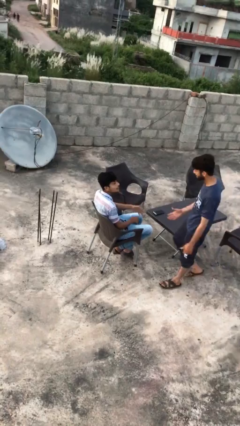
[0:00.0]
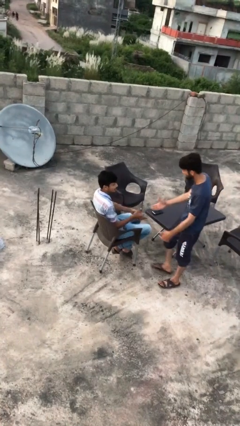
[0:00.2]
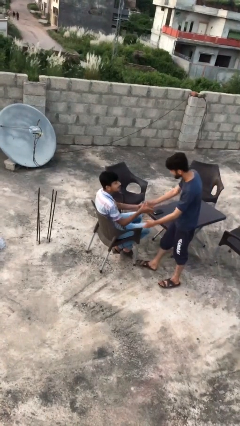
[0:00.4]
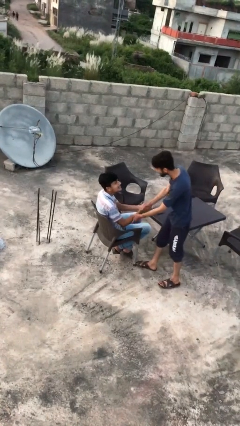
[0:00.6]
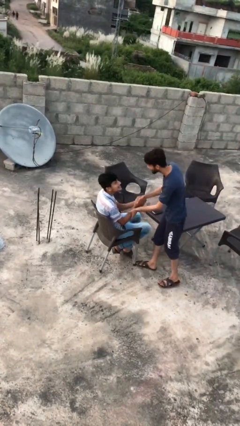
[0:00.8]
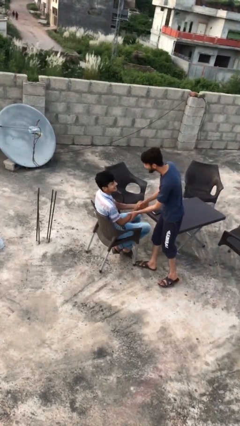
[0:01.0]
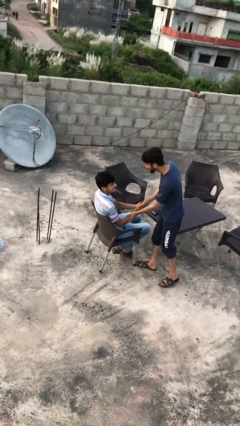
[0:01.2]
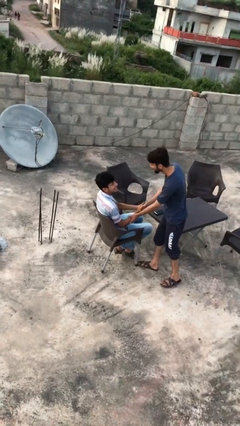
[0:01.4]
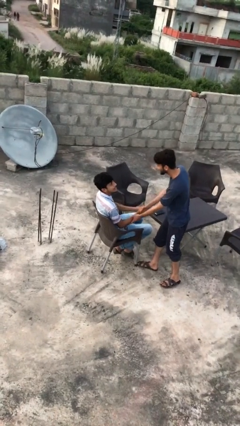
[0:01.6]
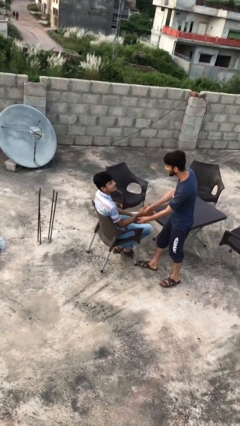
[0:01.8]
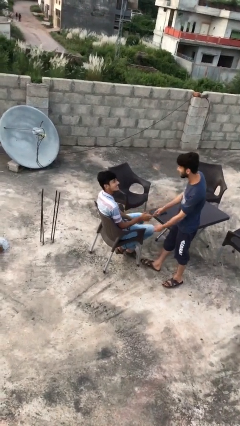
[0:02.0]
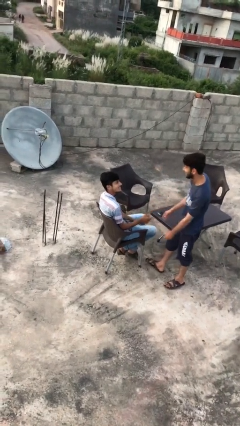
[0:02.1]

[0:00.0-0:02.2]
person shakes hand

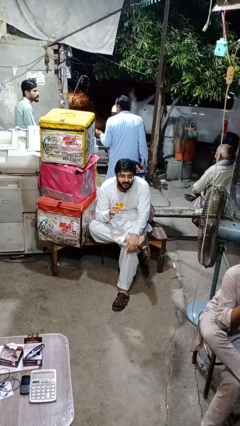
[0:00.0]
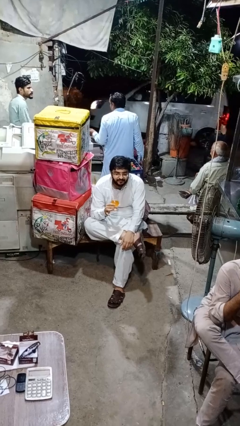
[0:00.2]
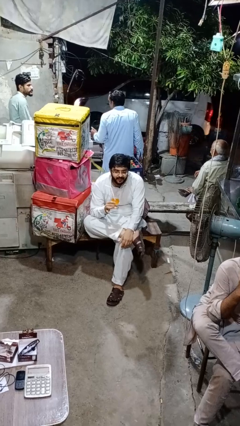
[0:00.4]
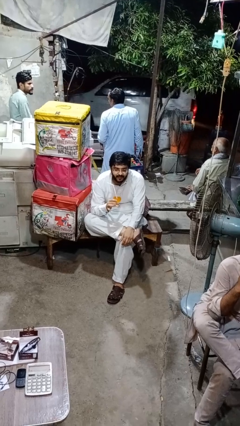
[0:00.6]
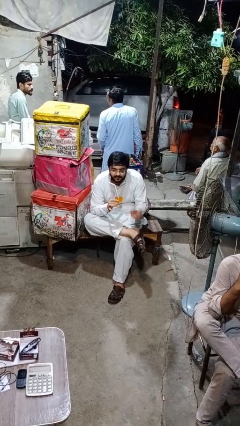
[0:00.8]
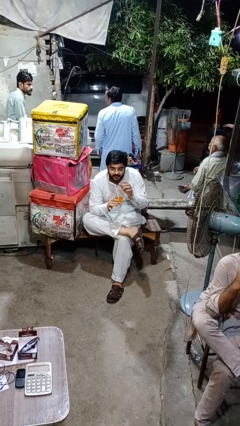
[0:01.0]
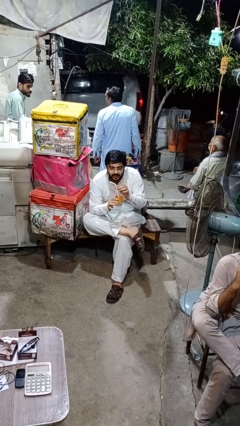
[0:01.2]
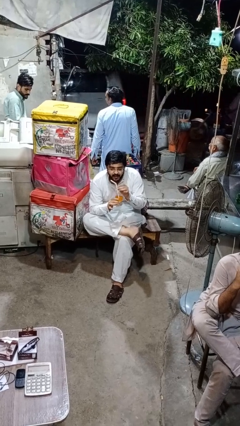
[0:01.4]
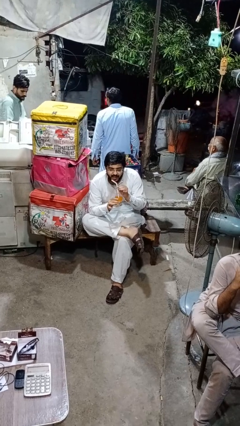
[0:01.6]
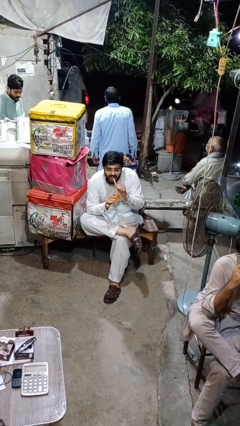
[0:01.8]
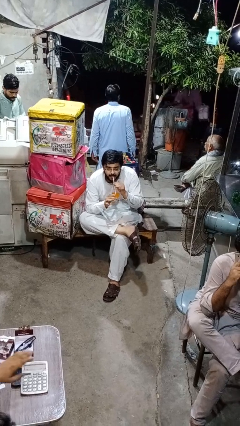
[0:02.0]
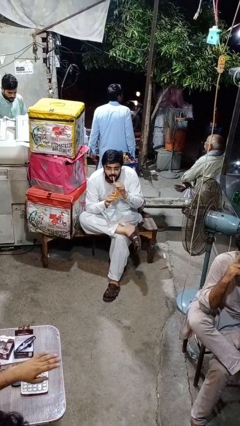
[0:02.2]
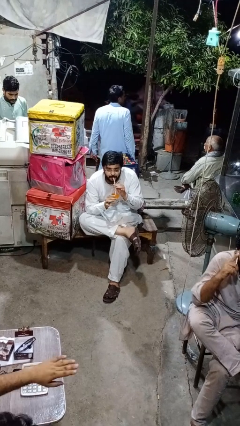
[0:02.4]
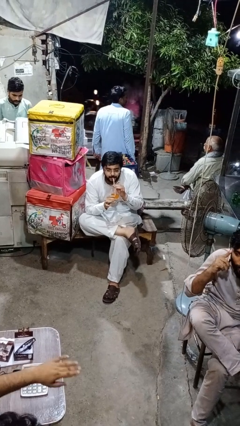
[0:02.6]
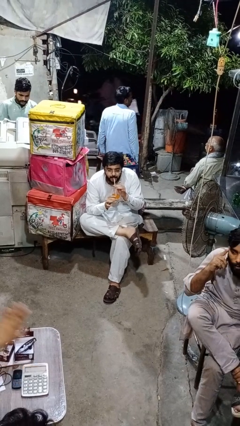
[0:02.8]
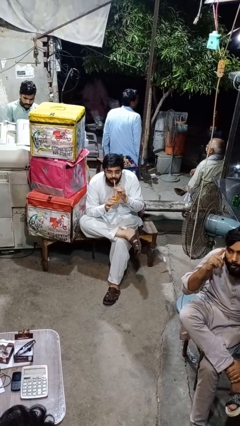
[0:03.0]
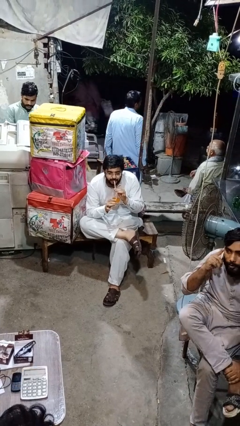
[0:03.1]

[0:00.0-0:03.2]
person drinks from straw

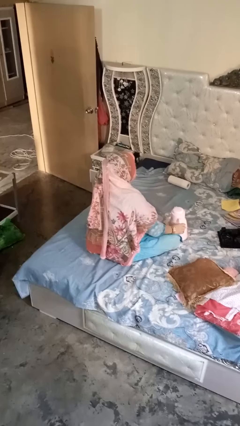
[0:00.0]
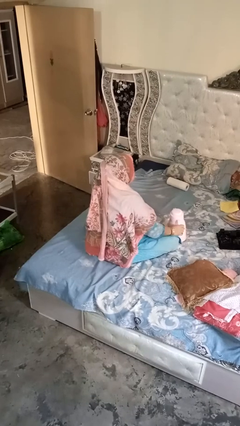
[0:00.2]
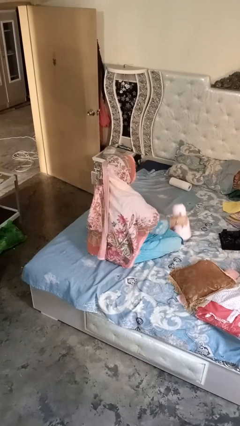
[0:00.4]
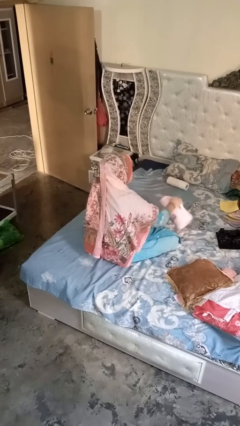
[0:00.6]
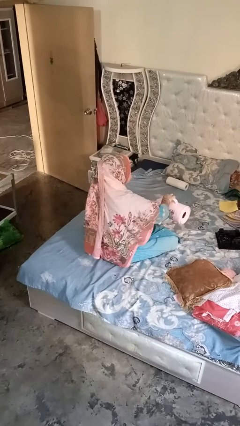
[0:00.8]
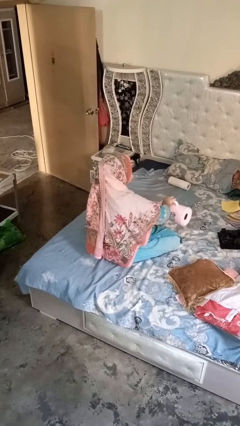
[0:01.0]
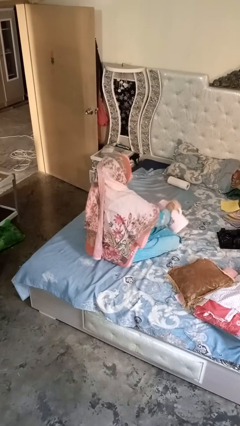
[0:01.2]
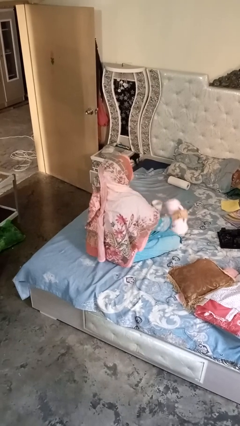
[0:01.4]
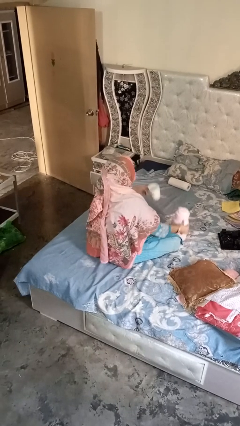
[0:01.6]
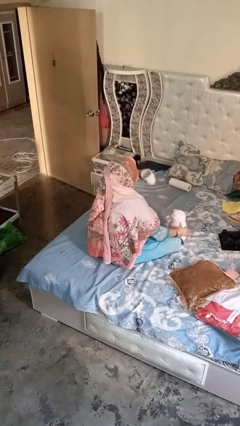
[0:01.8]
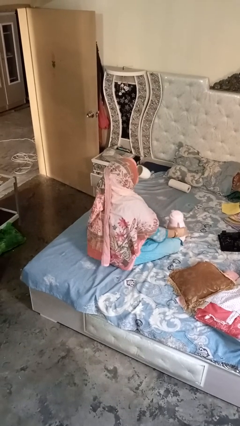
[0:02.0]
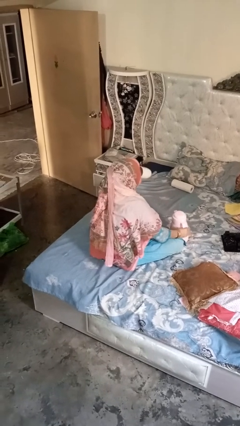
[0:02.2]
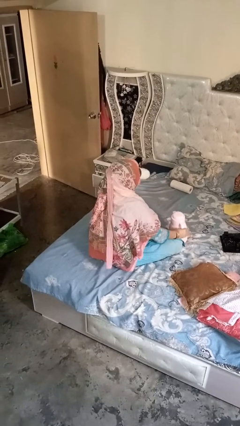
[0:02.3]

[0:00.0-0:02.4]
person pours coffee into mug

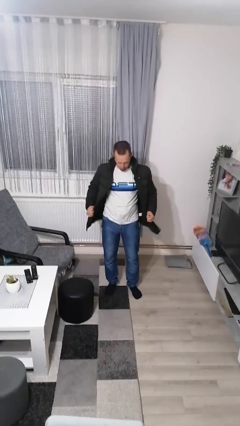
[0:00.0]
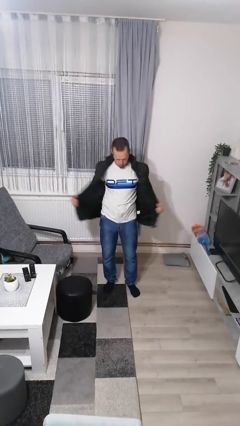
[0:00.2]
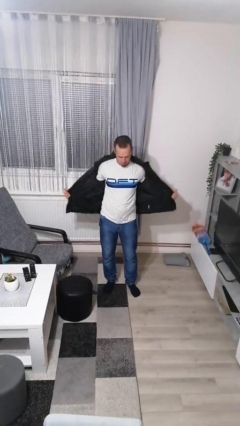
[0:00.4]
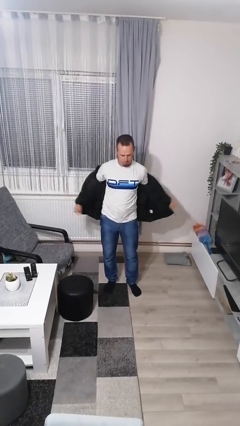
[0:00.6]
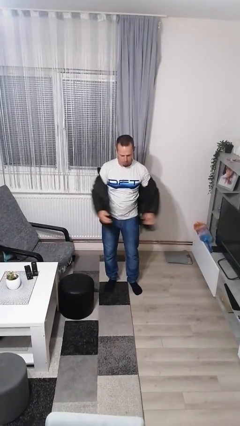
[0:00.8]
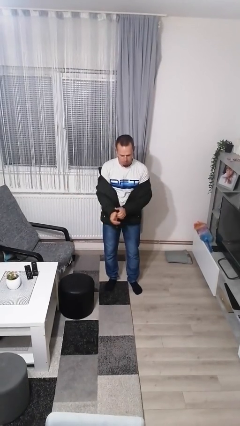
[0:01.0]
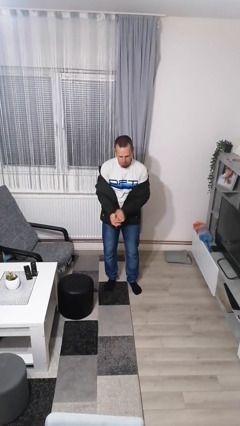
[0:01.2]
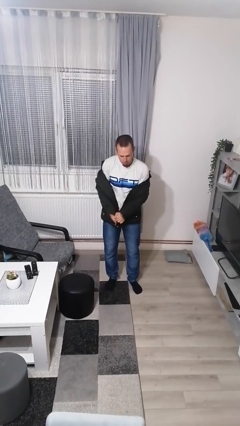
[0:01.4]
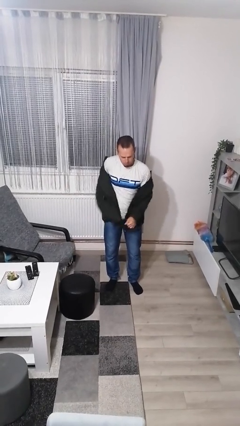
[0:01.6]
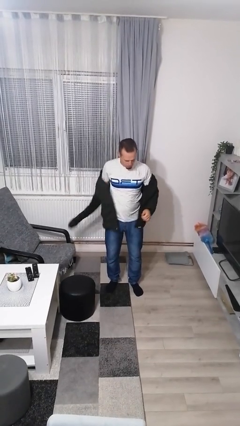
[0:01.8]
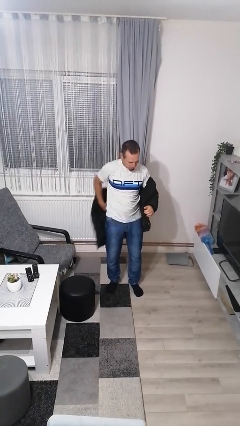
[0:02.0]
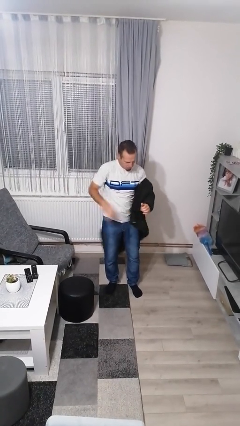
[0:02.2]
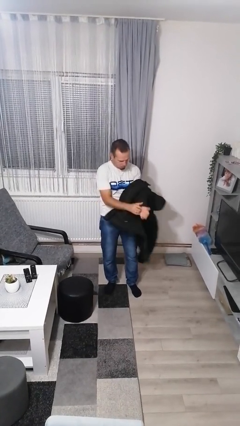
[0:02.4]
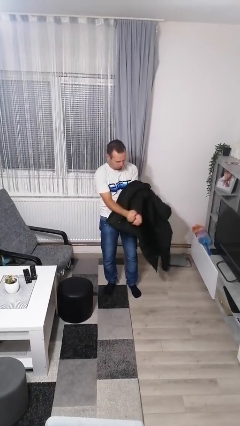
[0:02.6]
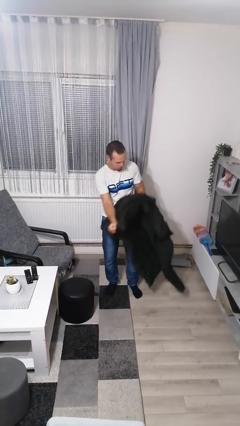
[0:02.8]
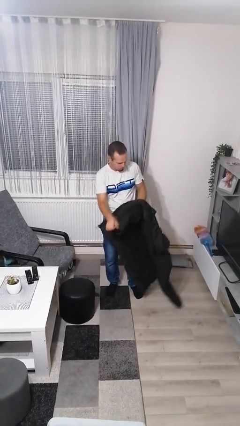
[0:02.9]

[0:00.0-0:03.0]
person takes off jacket

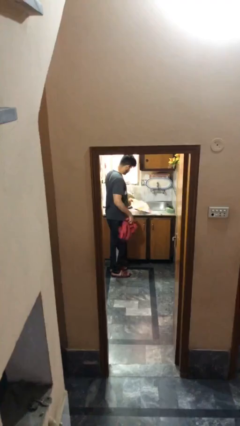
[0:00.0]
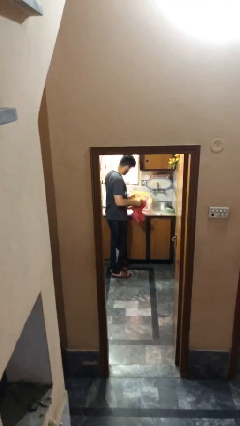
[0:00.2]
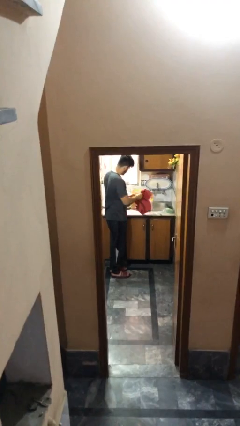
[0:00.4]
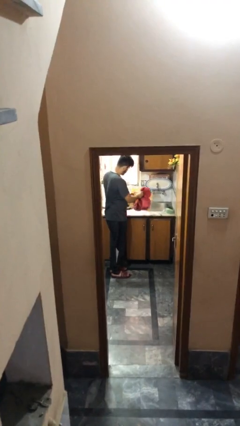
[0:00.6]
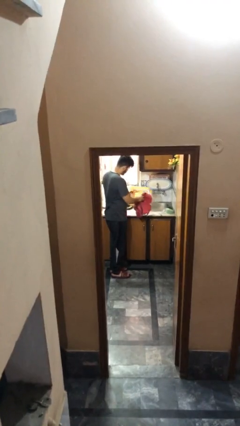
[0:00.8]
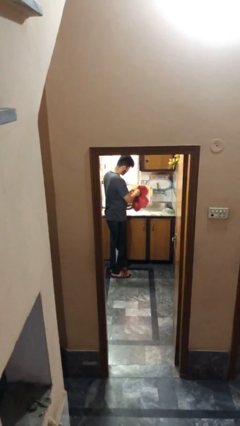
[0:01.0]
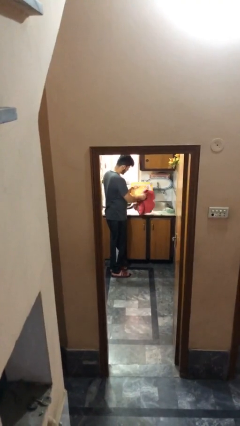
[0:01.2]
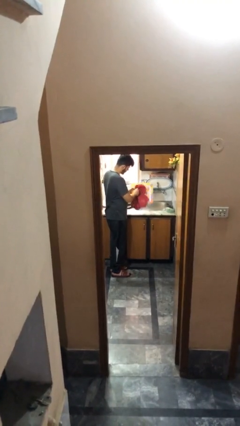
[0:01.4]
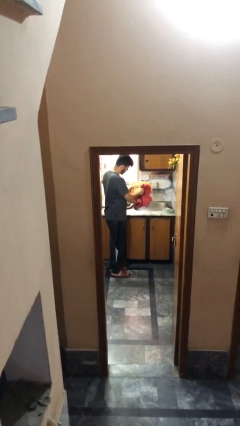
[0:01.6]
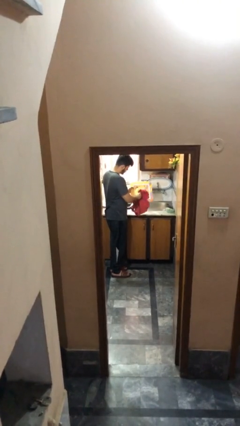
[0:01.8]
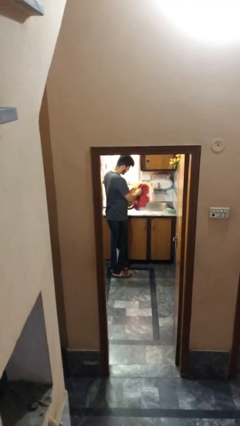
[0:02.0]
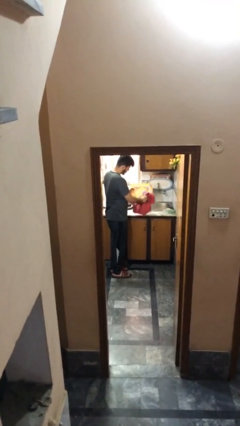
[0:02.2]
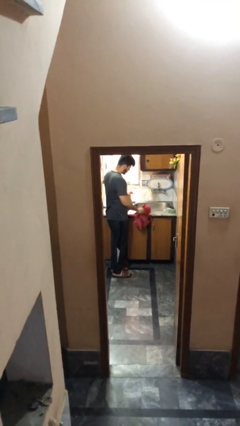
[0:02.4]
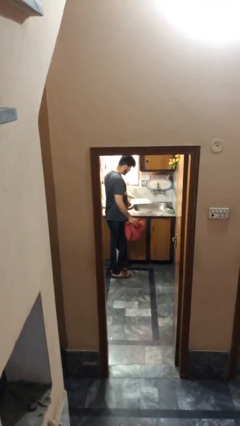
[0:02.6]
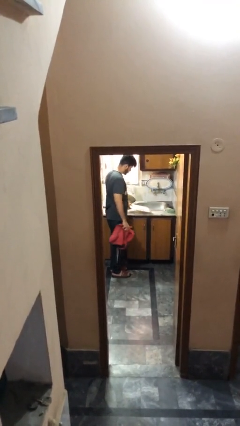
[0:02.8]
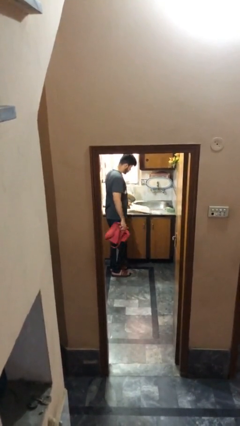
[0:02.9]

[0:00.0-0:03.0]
person dries dish

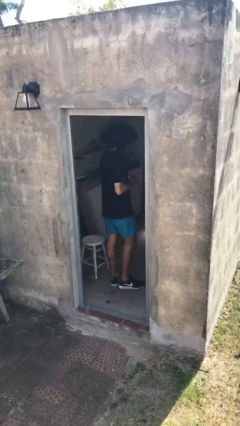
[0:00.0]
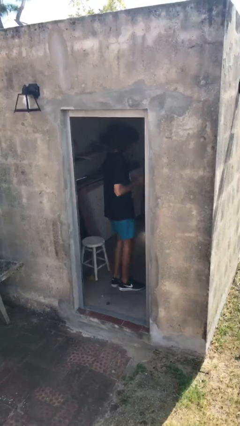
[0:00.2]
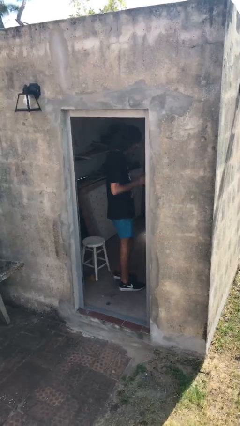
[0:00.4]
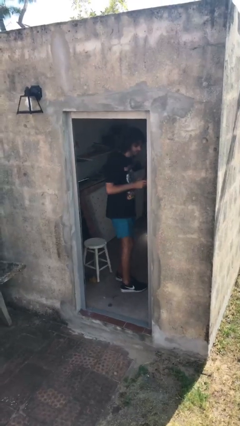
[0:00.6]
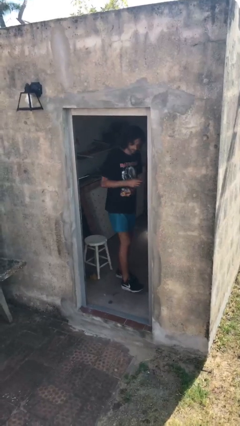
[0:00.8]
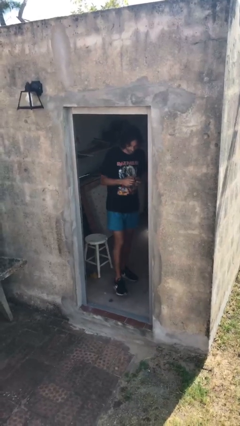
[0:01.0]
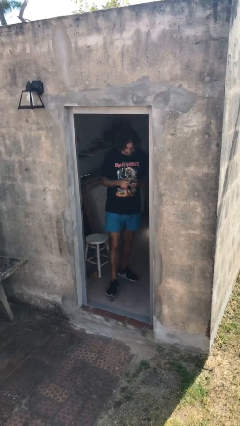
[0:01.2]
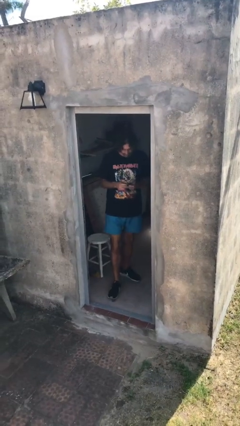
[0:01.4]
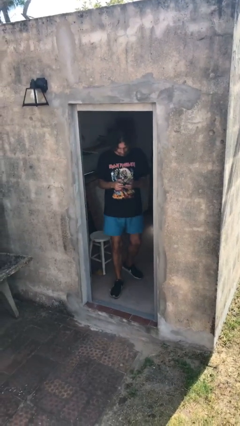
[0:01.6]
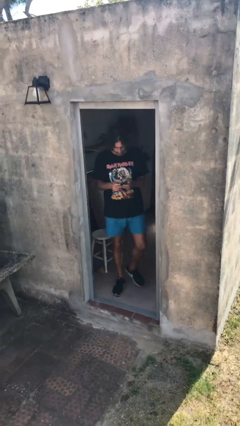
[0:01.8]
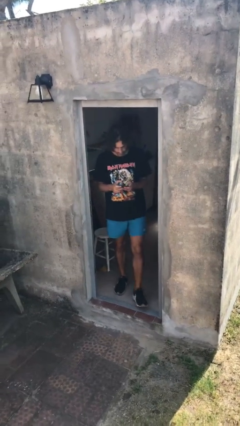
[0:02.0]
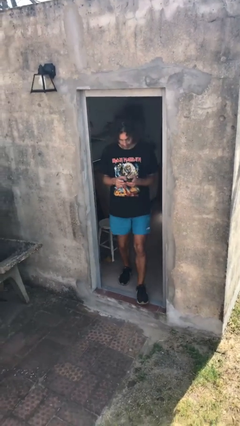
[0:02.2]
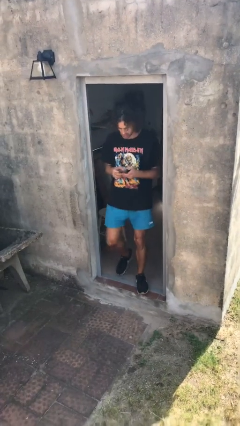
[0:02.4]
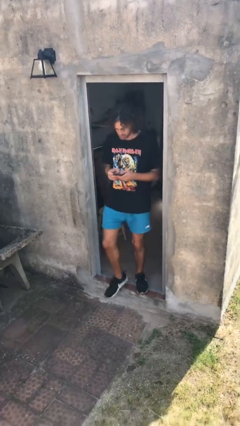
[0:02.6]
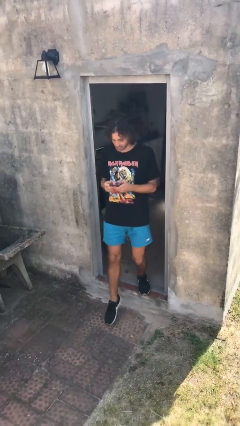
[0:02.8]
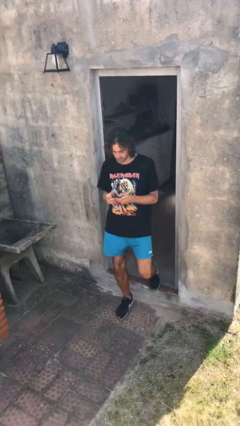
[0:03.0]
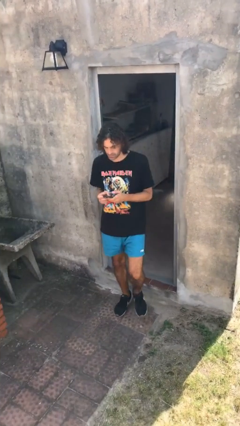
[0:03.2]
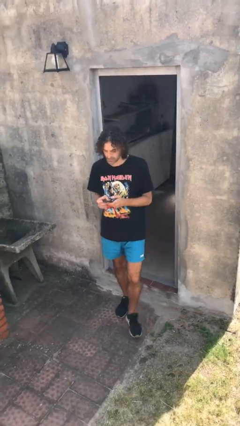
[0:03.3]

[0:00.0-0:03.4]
person enters scene through structure

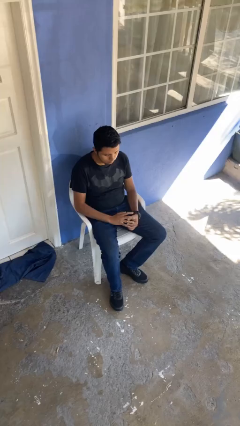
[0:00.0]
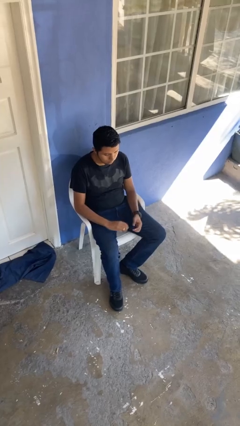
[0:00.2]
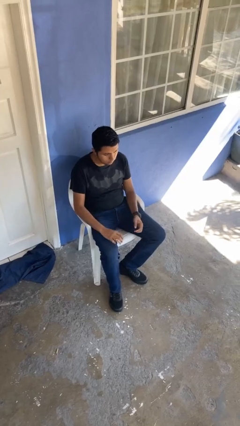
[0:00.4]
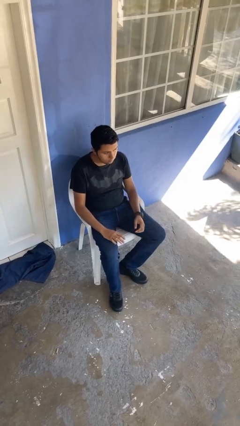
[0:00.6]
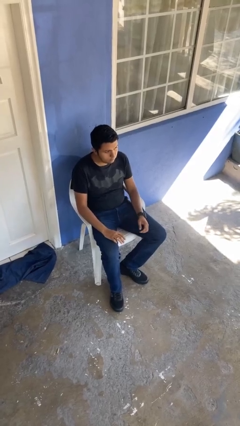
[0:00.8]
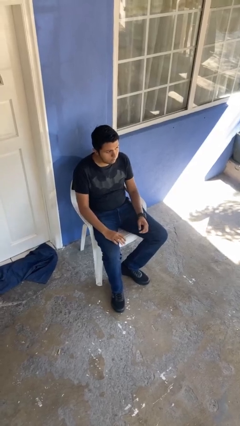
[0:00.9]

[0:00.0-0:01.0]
person puts on ring
